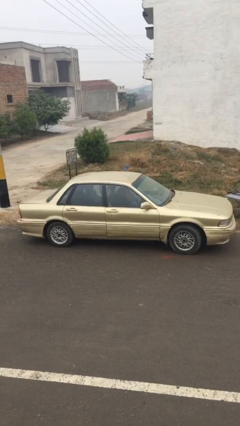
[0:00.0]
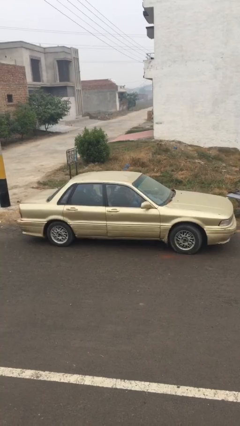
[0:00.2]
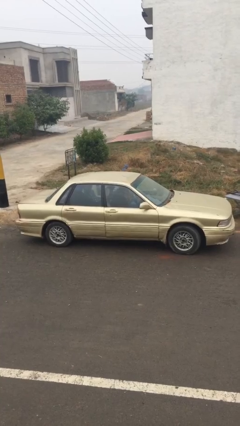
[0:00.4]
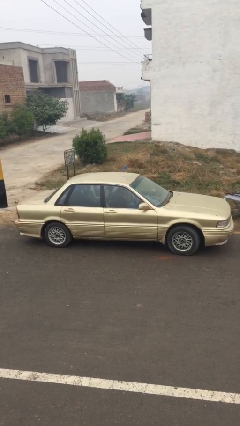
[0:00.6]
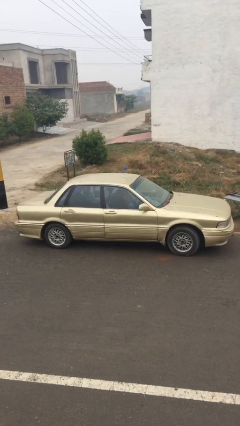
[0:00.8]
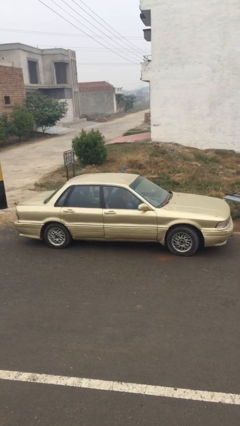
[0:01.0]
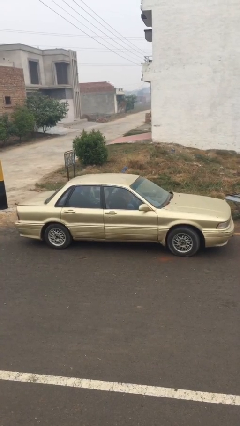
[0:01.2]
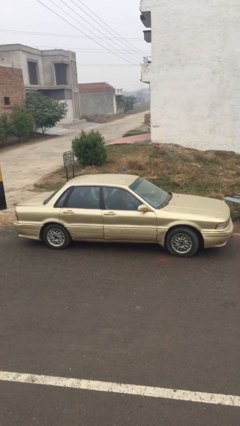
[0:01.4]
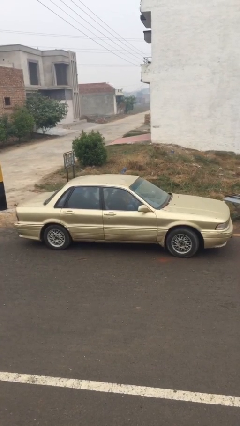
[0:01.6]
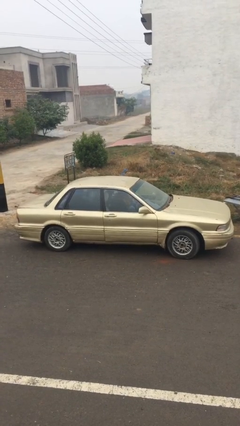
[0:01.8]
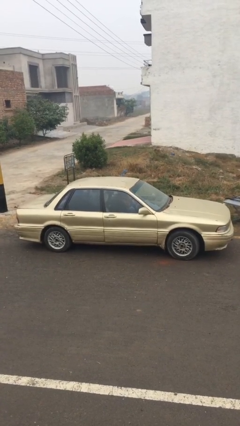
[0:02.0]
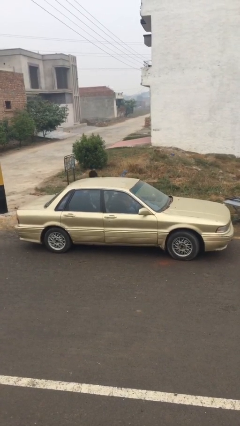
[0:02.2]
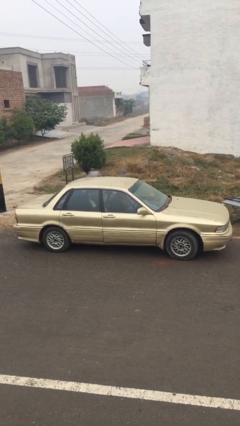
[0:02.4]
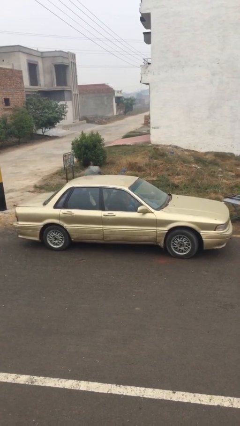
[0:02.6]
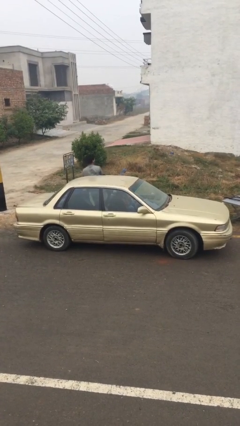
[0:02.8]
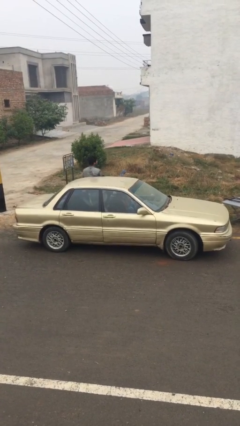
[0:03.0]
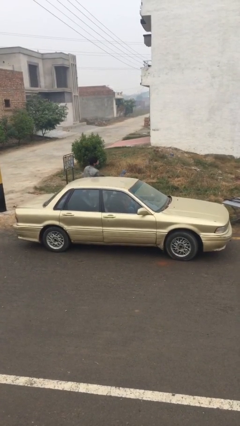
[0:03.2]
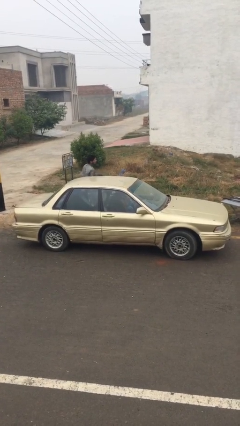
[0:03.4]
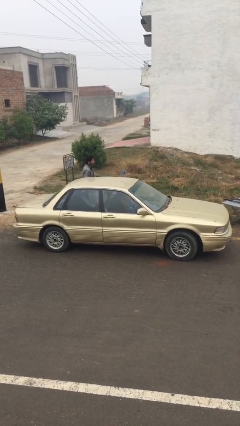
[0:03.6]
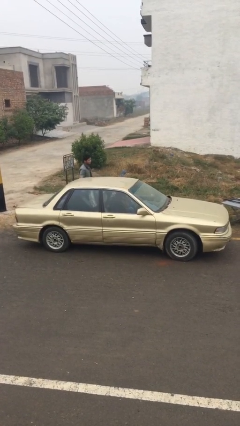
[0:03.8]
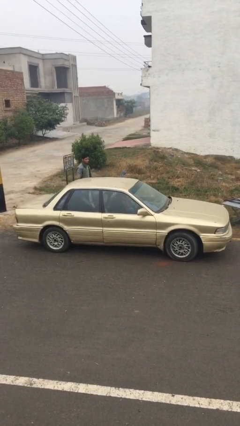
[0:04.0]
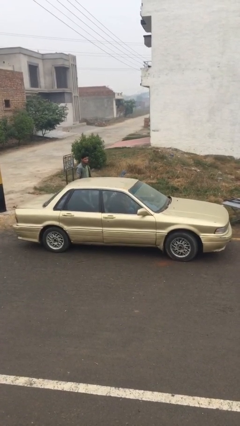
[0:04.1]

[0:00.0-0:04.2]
car drops off person

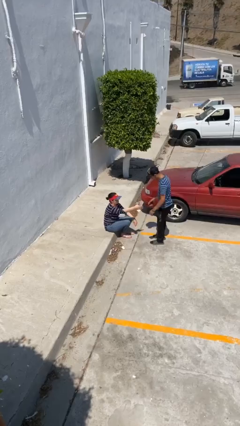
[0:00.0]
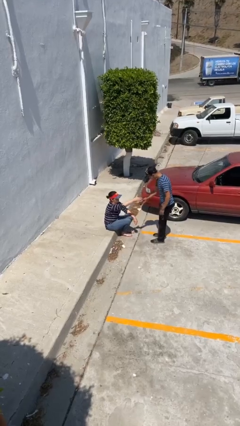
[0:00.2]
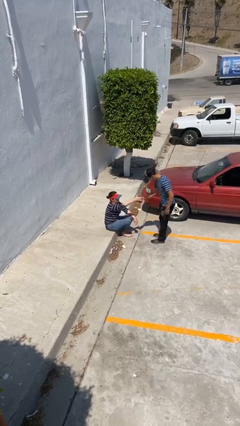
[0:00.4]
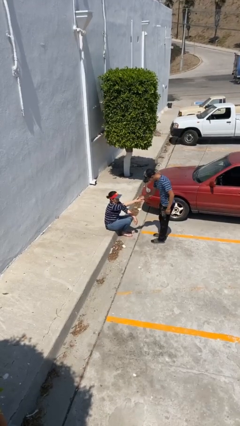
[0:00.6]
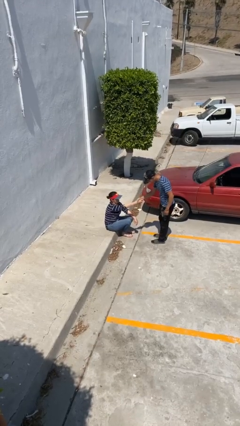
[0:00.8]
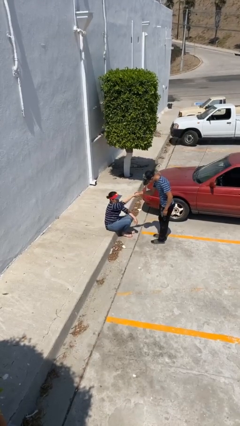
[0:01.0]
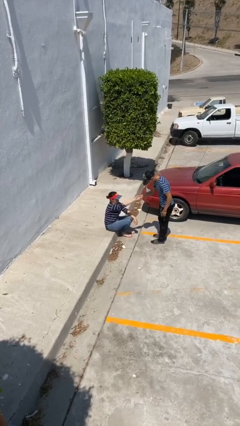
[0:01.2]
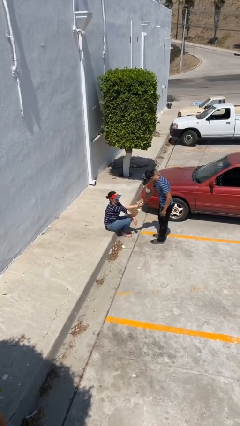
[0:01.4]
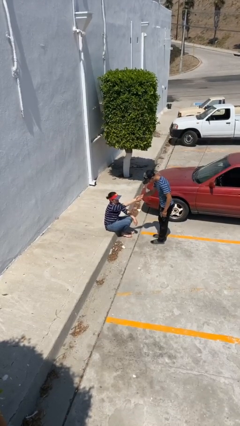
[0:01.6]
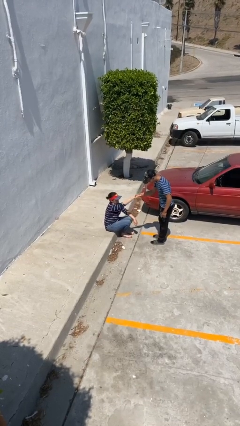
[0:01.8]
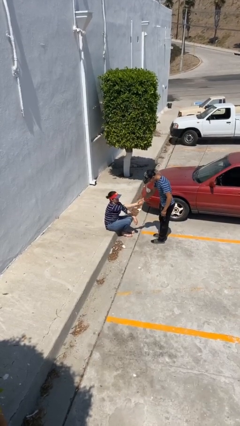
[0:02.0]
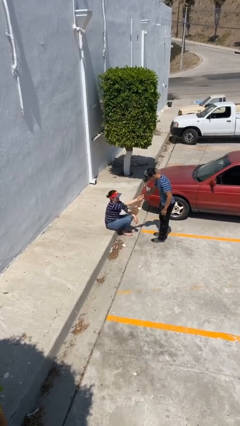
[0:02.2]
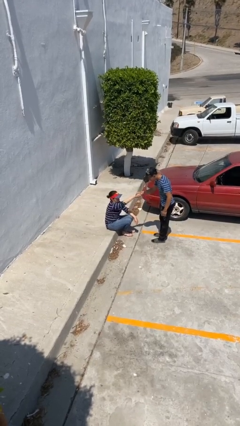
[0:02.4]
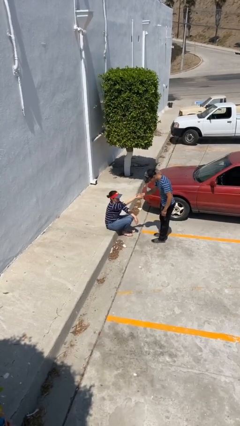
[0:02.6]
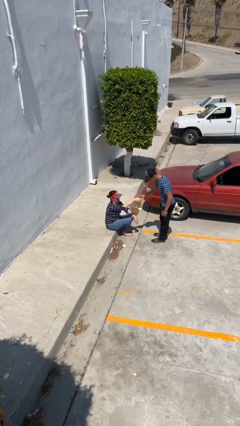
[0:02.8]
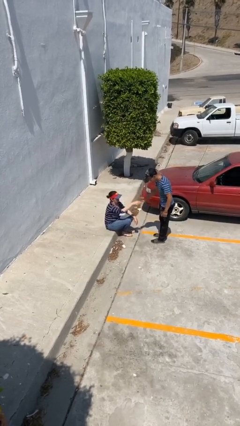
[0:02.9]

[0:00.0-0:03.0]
person shakes hand

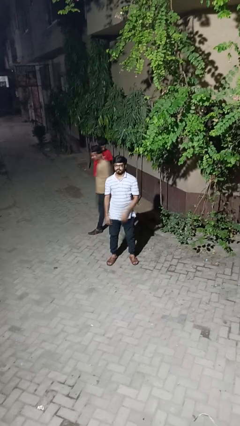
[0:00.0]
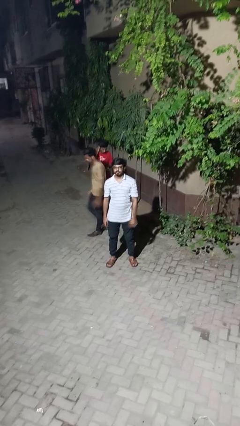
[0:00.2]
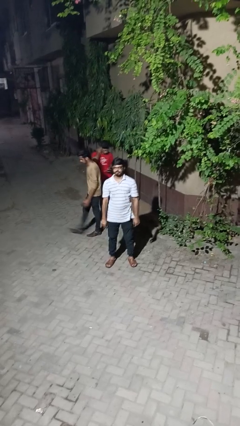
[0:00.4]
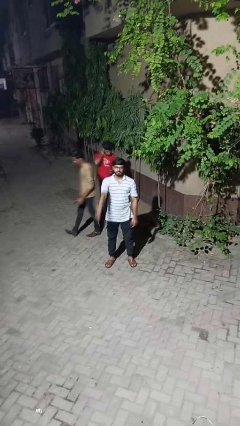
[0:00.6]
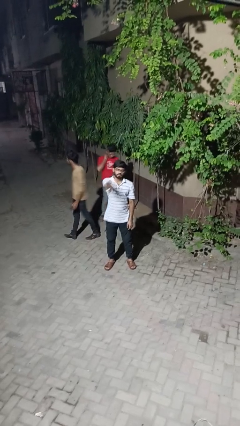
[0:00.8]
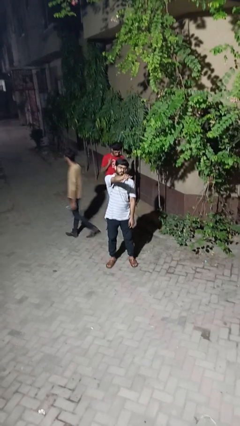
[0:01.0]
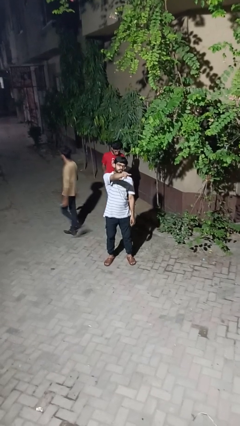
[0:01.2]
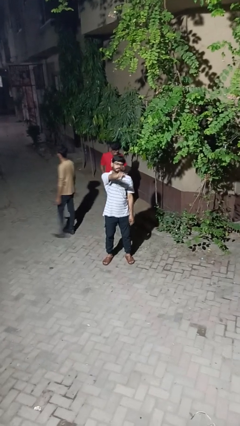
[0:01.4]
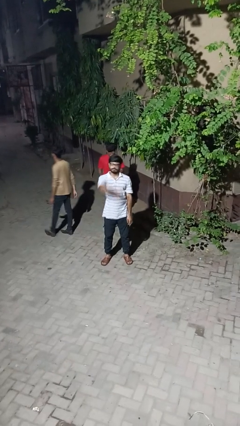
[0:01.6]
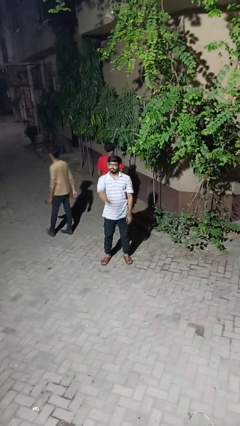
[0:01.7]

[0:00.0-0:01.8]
person points at person

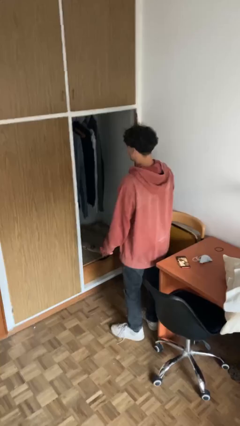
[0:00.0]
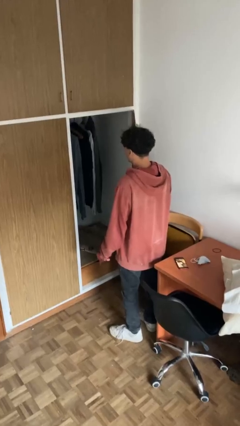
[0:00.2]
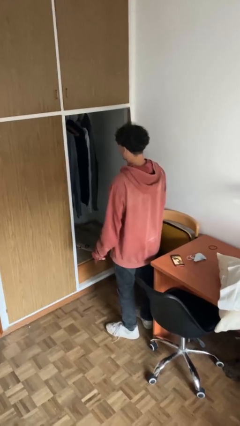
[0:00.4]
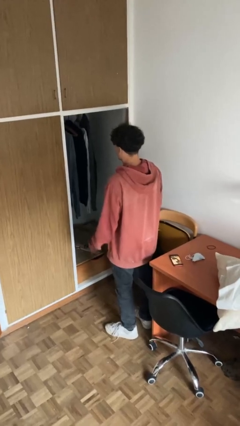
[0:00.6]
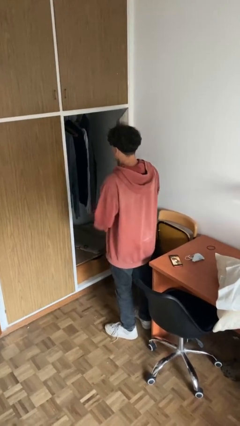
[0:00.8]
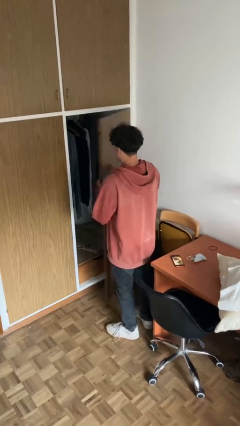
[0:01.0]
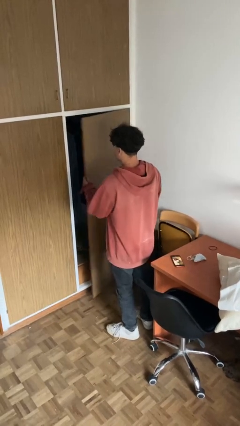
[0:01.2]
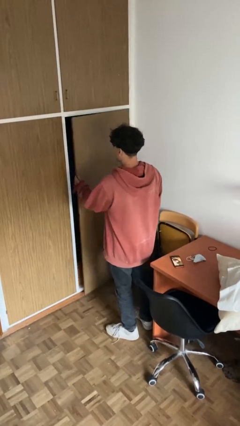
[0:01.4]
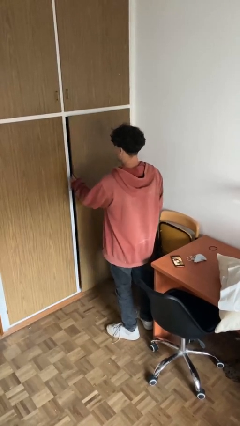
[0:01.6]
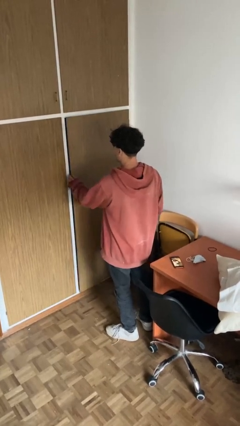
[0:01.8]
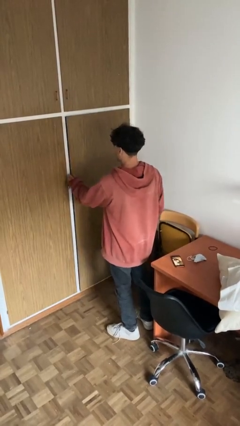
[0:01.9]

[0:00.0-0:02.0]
person closes closet door

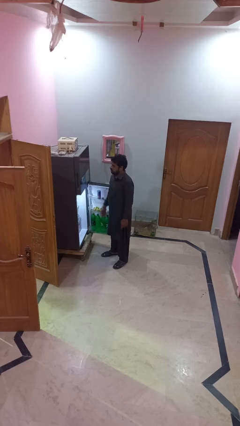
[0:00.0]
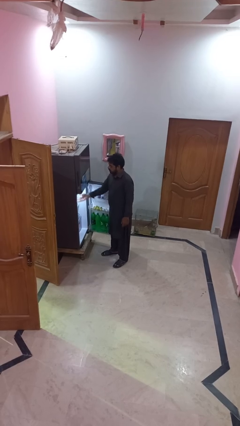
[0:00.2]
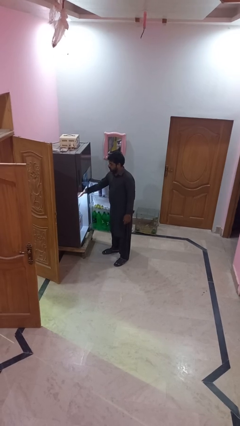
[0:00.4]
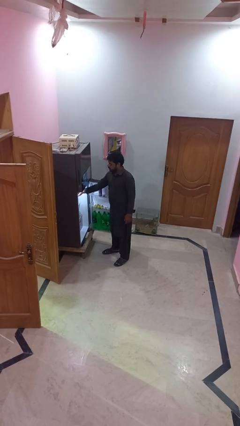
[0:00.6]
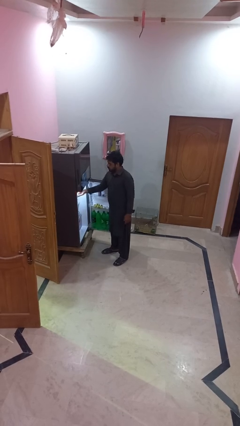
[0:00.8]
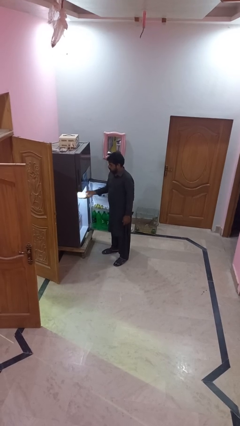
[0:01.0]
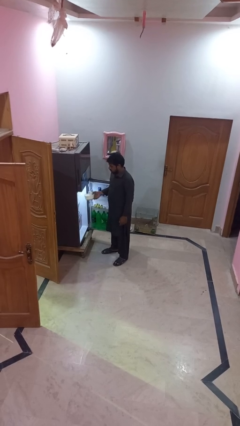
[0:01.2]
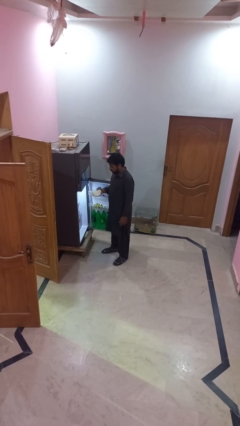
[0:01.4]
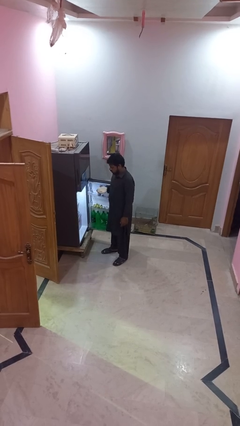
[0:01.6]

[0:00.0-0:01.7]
person takes object from refrigerator

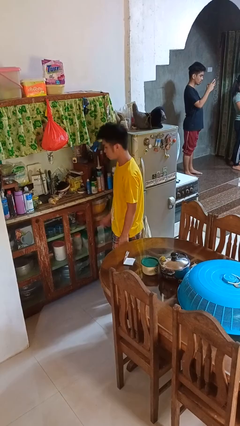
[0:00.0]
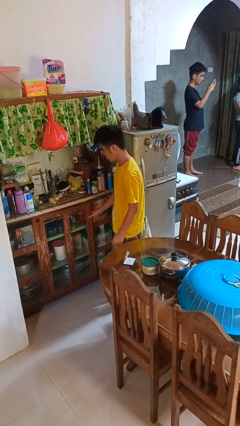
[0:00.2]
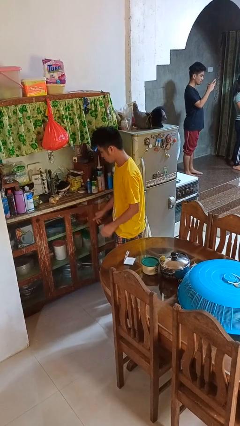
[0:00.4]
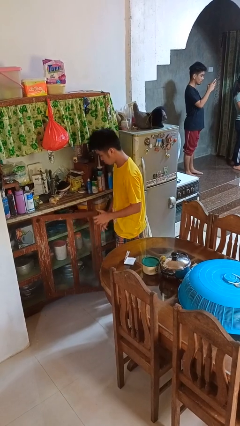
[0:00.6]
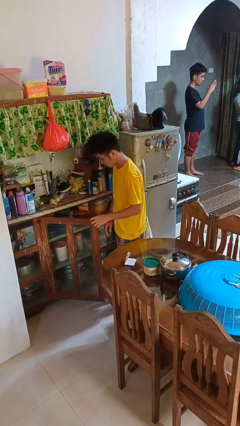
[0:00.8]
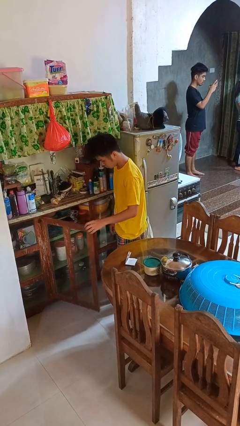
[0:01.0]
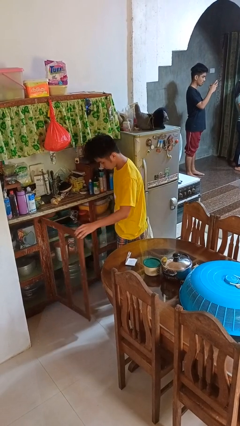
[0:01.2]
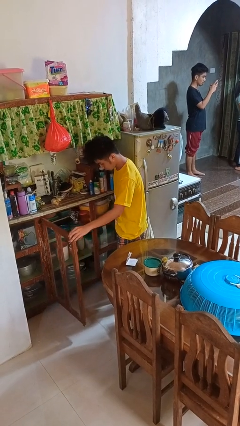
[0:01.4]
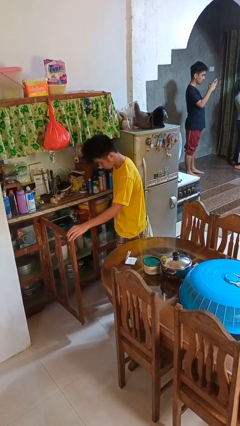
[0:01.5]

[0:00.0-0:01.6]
person opens cabinet

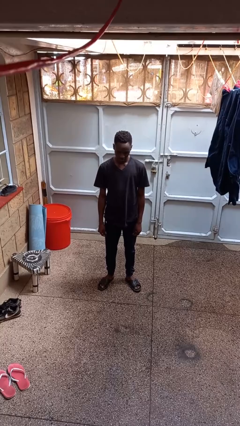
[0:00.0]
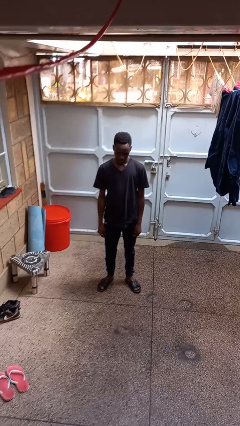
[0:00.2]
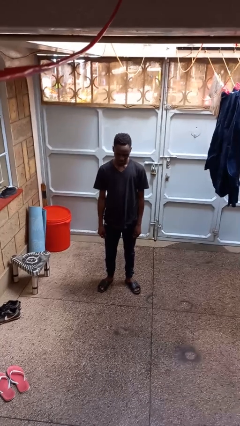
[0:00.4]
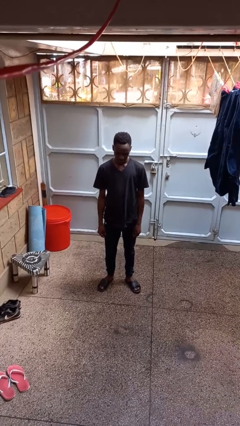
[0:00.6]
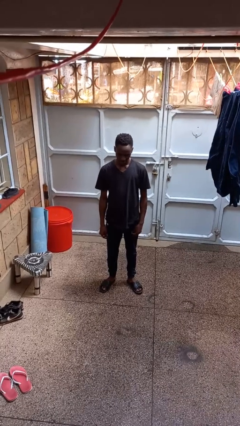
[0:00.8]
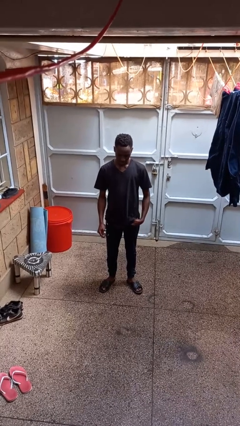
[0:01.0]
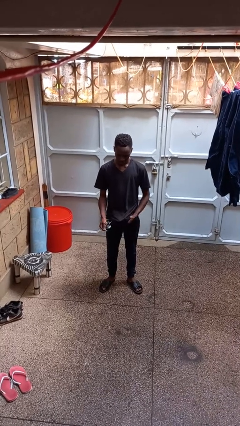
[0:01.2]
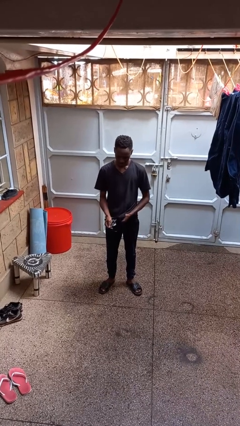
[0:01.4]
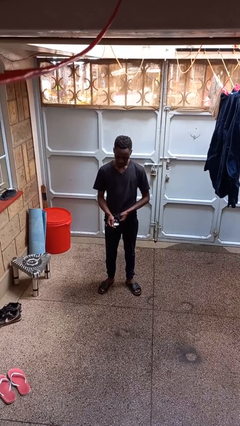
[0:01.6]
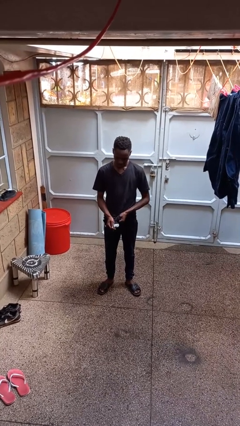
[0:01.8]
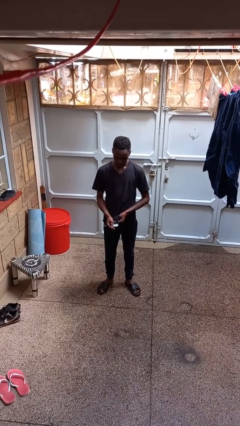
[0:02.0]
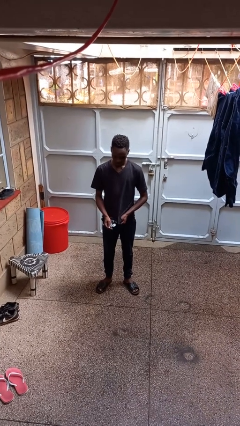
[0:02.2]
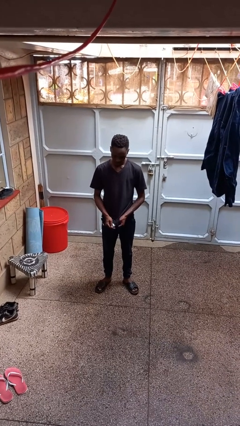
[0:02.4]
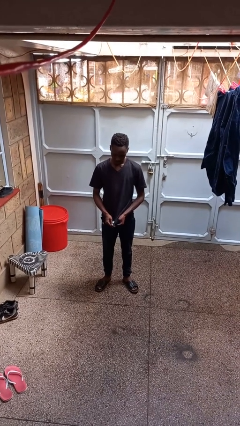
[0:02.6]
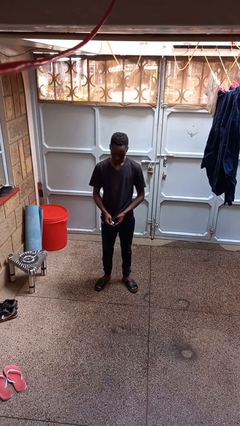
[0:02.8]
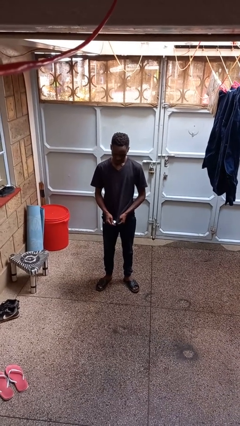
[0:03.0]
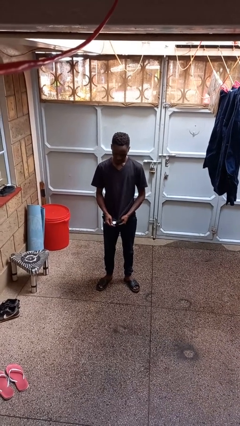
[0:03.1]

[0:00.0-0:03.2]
person cleans eyeglasses
